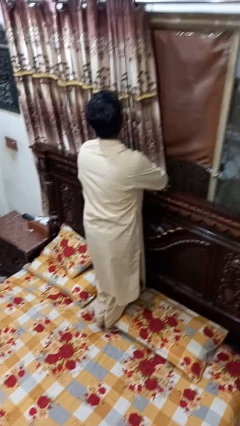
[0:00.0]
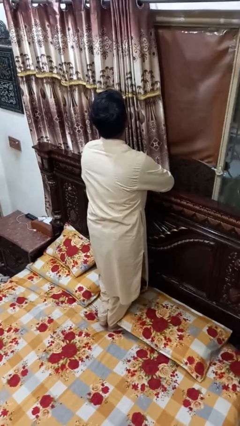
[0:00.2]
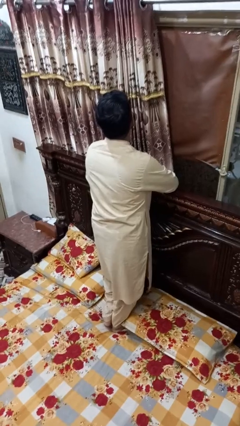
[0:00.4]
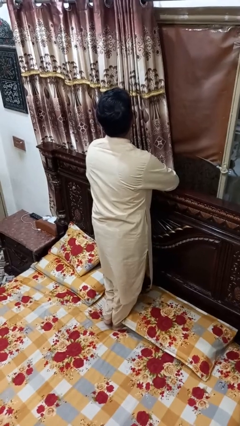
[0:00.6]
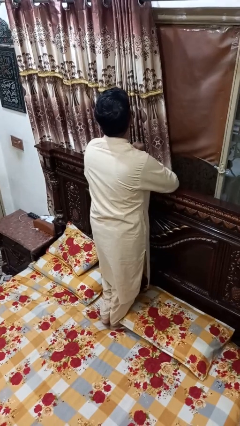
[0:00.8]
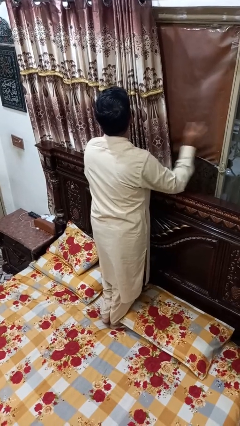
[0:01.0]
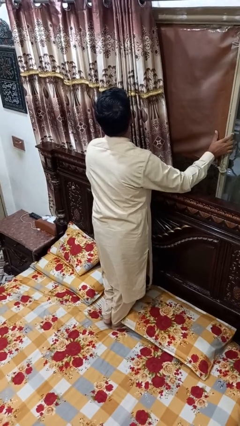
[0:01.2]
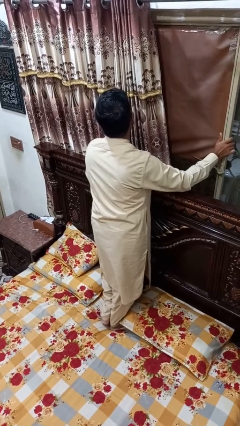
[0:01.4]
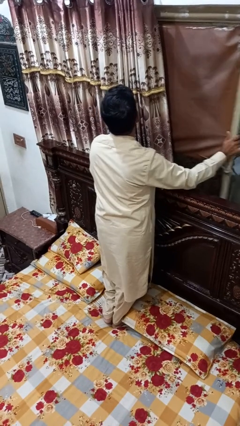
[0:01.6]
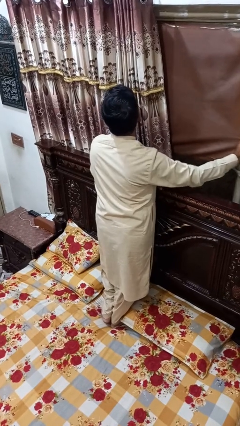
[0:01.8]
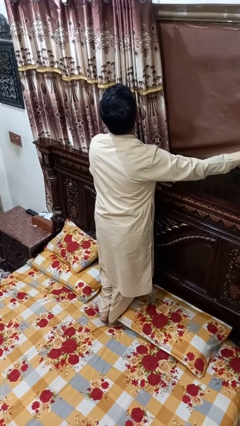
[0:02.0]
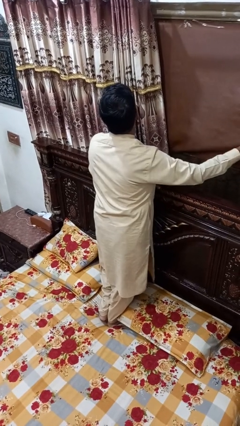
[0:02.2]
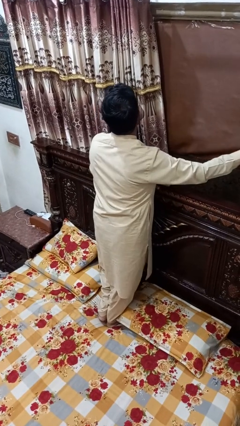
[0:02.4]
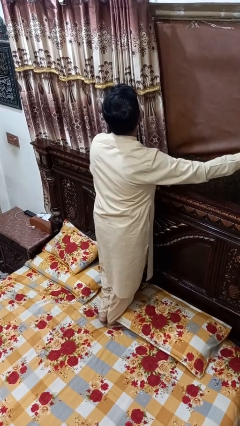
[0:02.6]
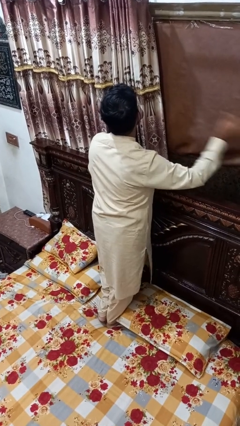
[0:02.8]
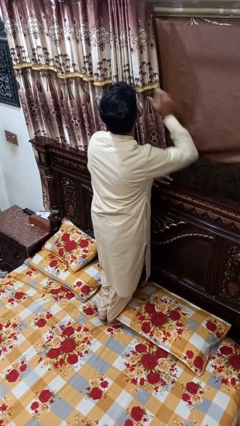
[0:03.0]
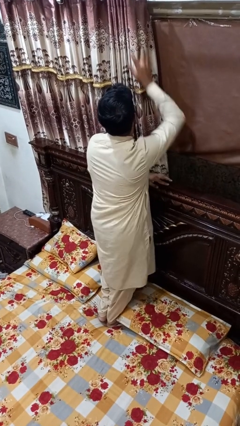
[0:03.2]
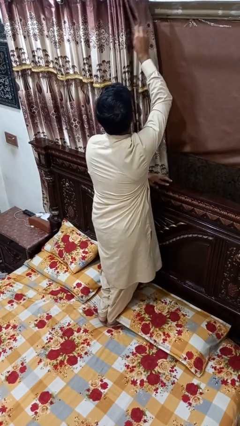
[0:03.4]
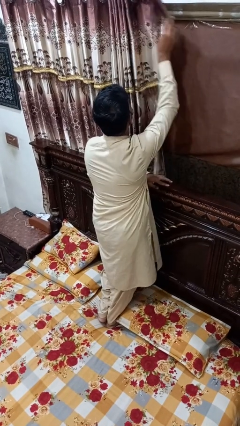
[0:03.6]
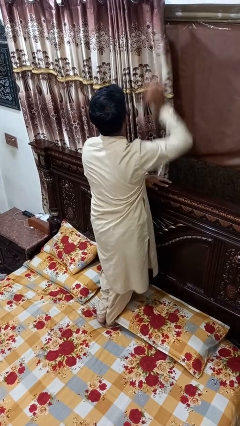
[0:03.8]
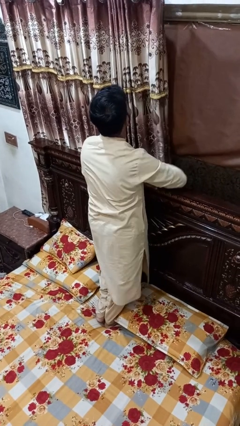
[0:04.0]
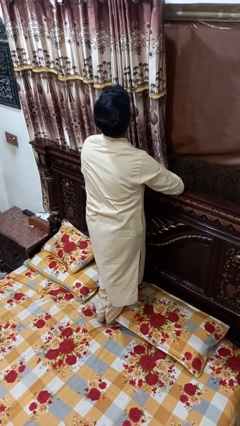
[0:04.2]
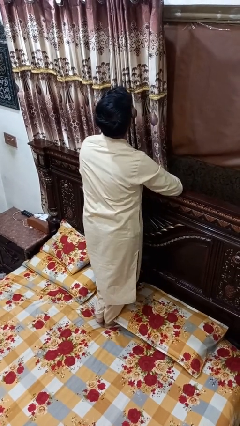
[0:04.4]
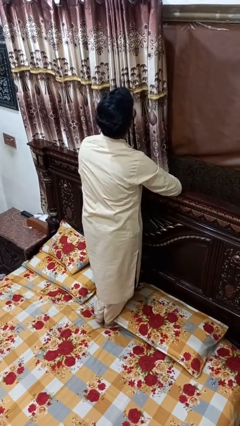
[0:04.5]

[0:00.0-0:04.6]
person closes home window

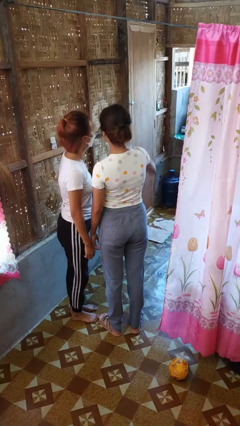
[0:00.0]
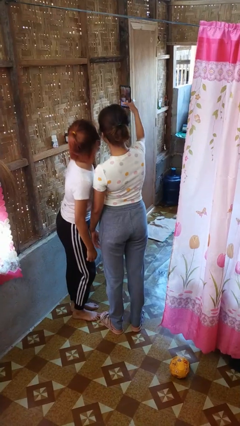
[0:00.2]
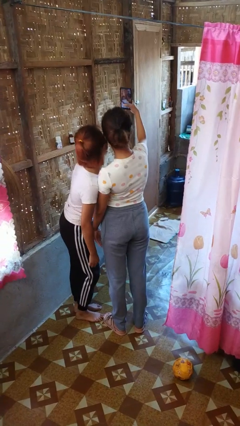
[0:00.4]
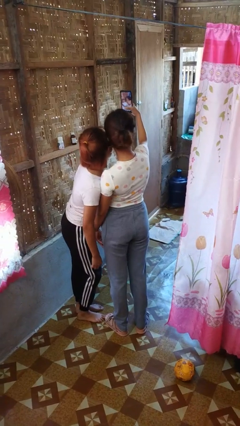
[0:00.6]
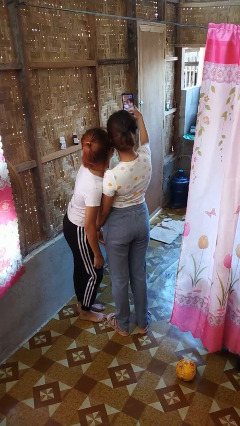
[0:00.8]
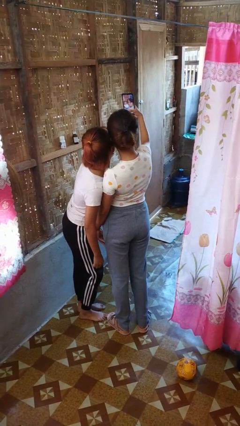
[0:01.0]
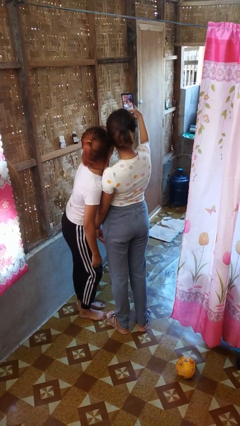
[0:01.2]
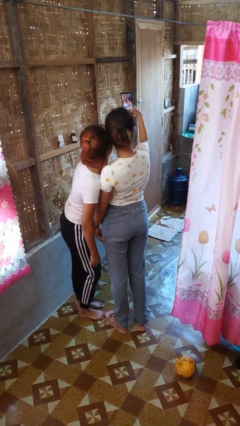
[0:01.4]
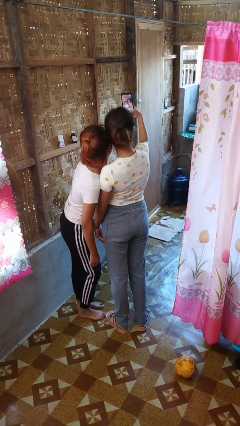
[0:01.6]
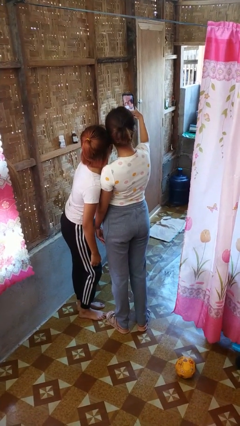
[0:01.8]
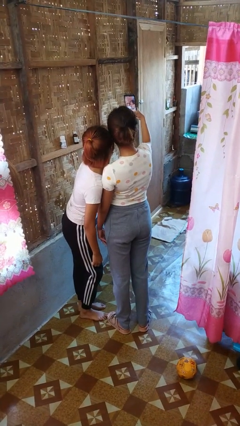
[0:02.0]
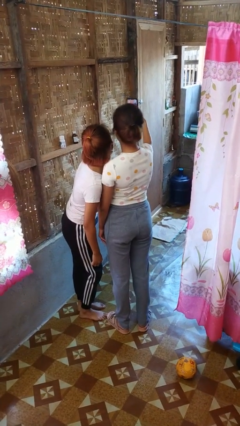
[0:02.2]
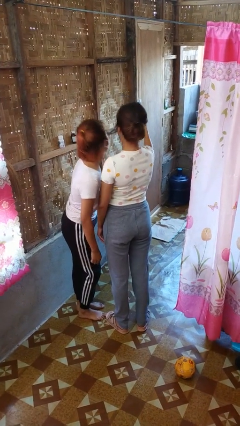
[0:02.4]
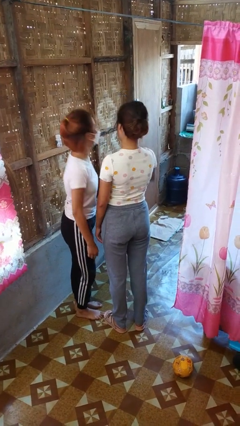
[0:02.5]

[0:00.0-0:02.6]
person takes selfie with person

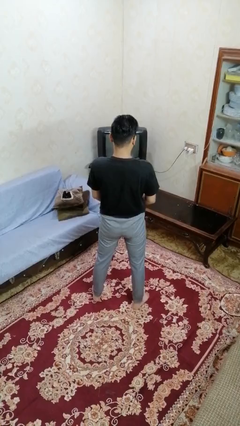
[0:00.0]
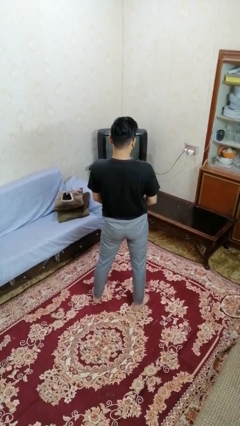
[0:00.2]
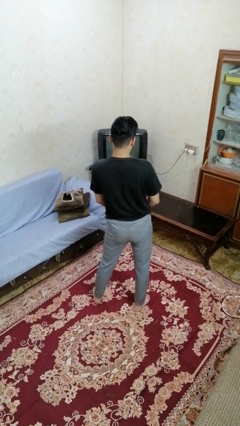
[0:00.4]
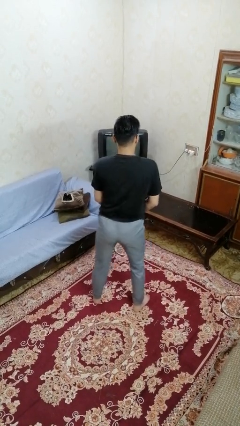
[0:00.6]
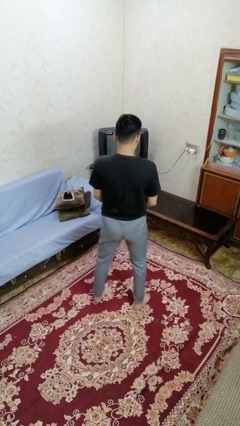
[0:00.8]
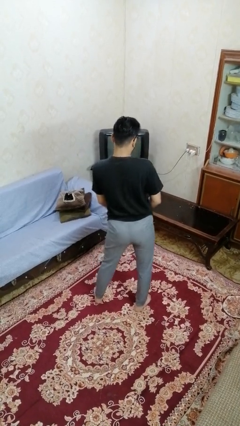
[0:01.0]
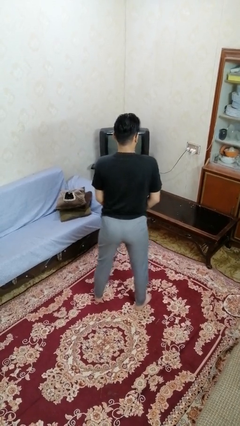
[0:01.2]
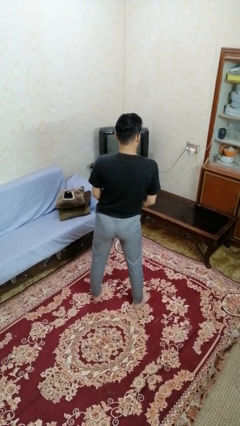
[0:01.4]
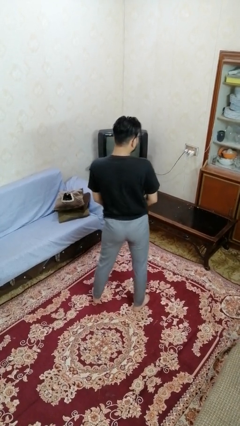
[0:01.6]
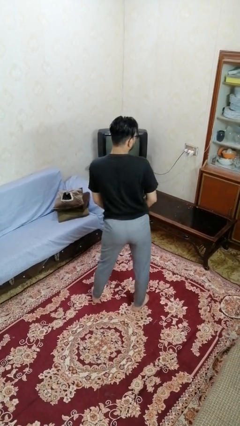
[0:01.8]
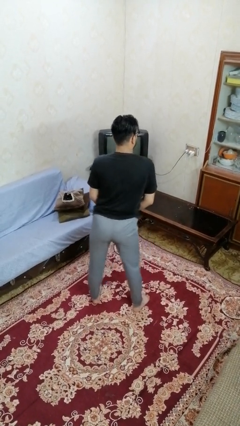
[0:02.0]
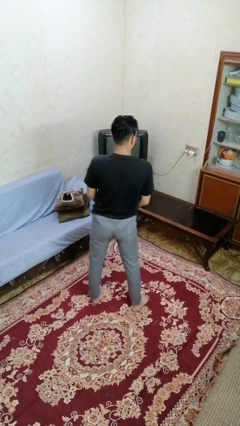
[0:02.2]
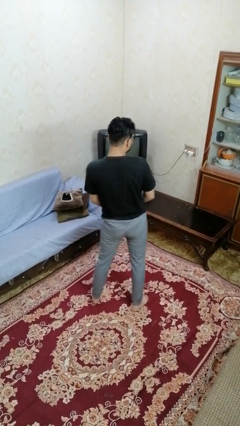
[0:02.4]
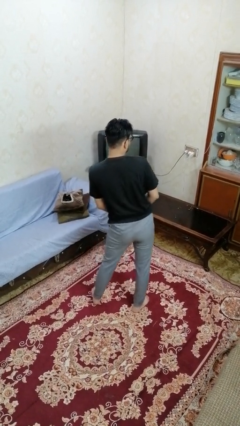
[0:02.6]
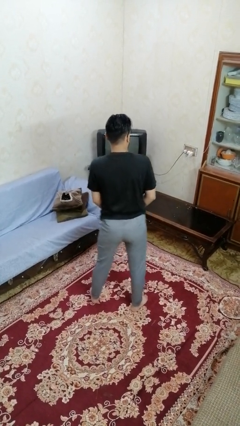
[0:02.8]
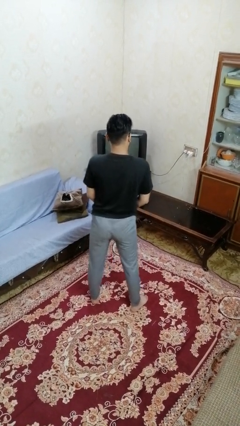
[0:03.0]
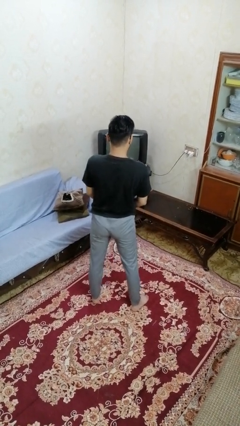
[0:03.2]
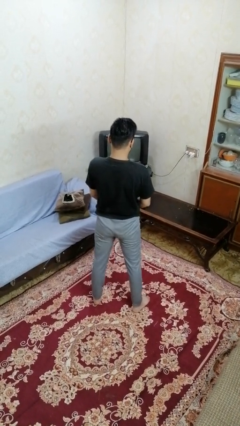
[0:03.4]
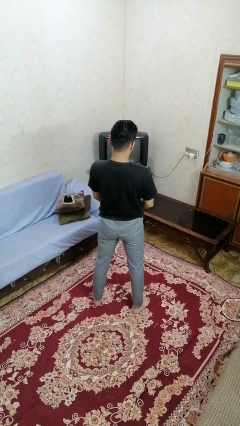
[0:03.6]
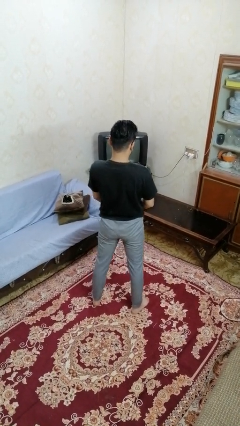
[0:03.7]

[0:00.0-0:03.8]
person wiggles hips

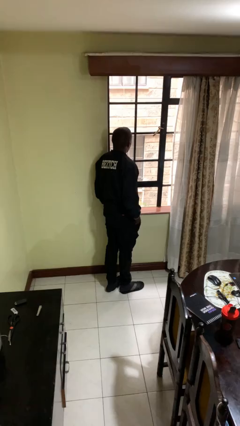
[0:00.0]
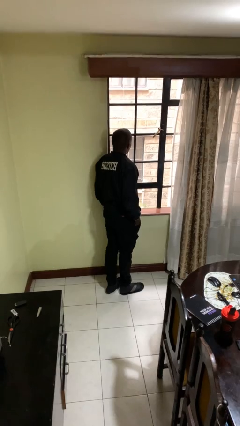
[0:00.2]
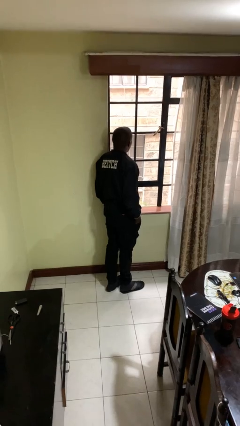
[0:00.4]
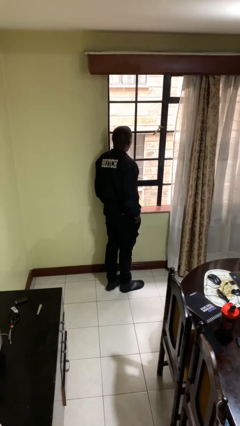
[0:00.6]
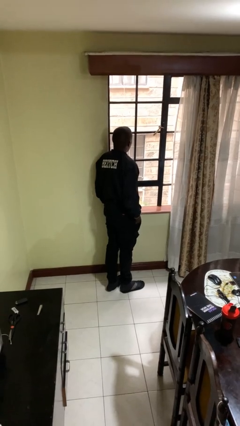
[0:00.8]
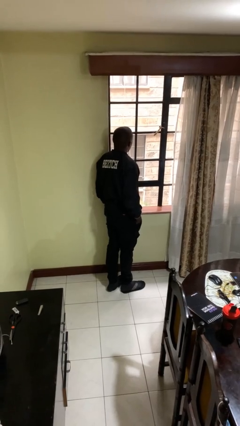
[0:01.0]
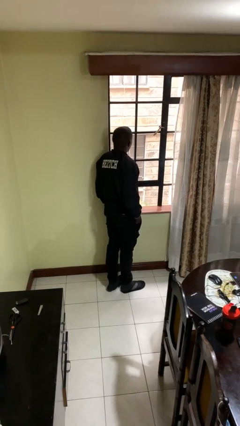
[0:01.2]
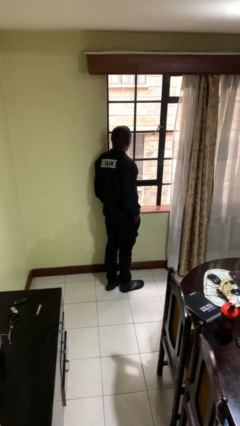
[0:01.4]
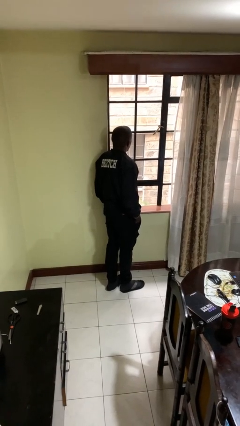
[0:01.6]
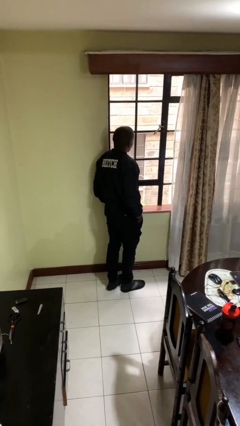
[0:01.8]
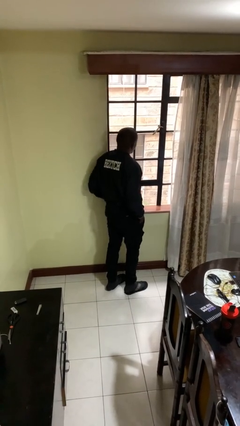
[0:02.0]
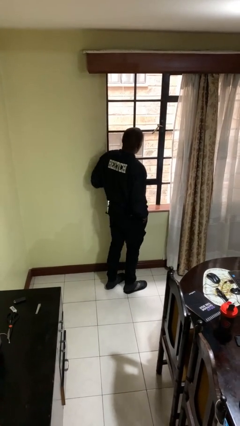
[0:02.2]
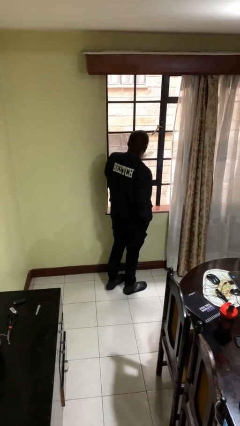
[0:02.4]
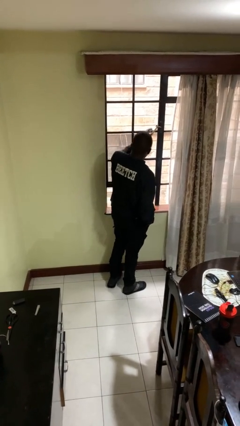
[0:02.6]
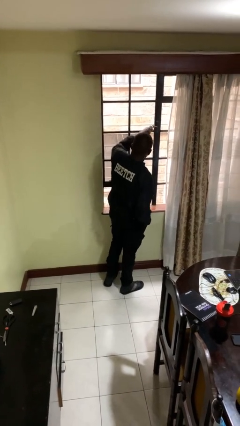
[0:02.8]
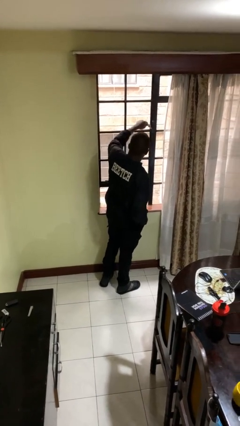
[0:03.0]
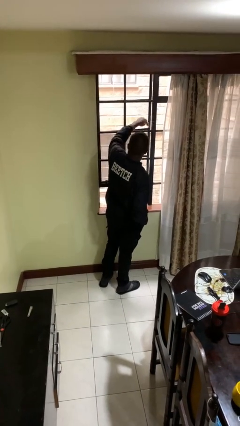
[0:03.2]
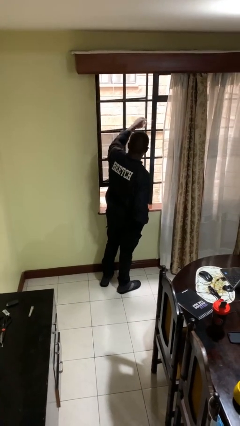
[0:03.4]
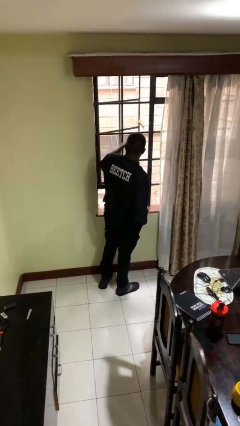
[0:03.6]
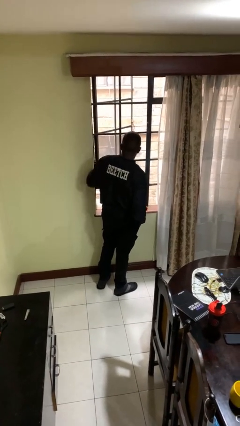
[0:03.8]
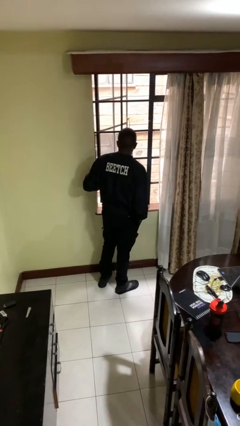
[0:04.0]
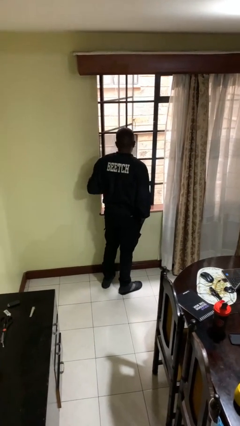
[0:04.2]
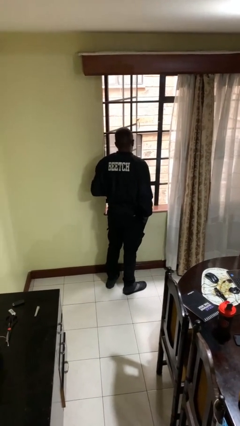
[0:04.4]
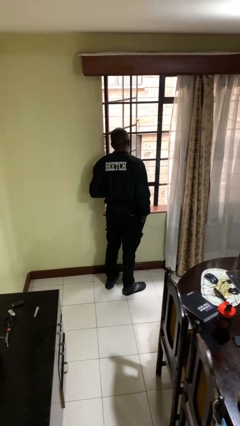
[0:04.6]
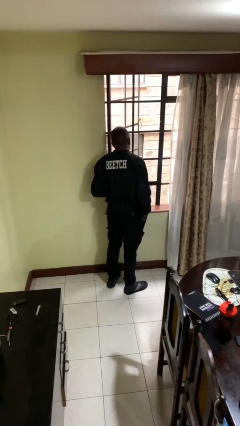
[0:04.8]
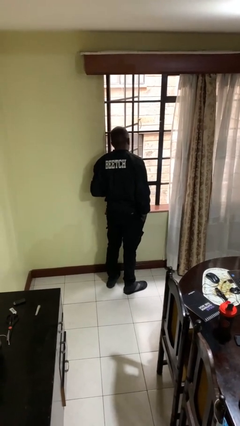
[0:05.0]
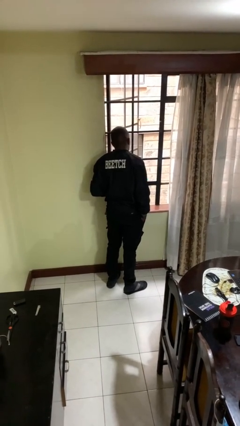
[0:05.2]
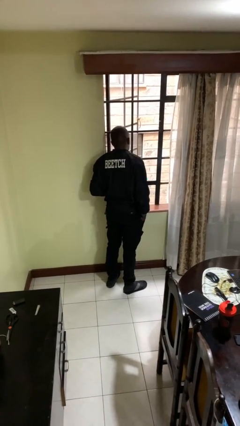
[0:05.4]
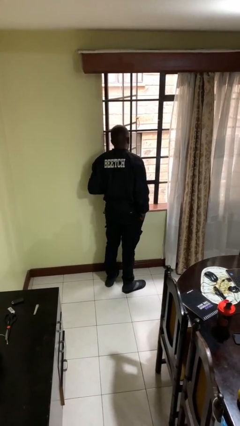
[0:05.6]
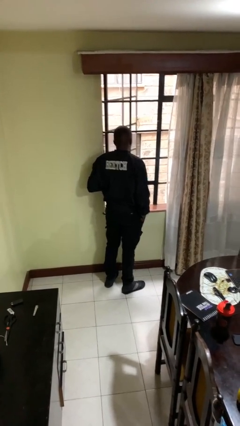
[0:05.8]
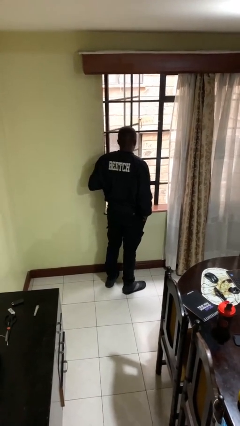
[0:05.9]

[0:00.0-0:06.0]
person opens home window

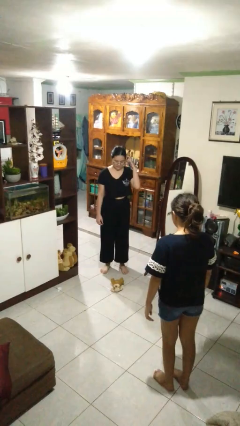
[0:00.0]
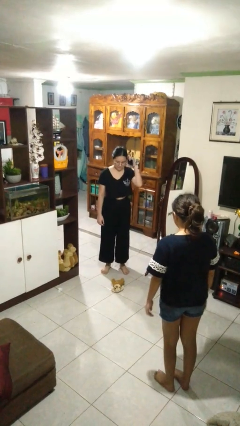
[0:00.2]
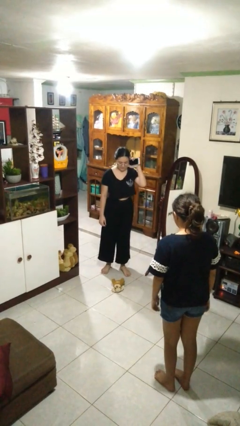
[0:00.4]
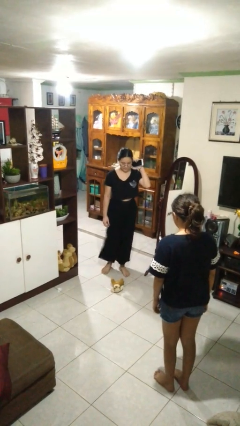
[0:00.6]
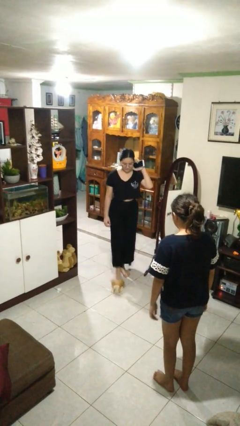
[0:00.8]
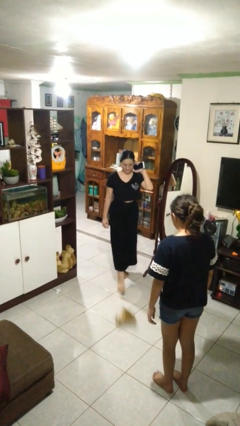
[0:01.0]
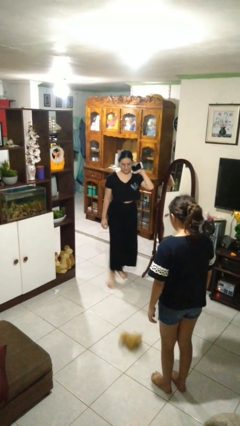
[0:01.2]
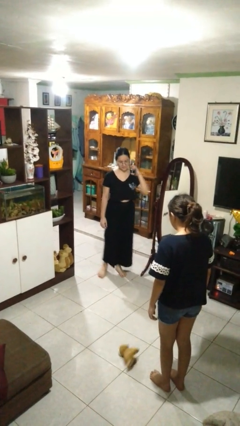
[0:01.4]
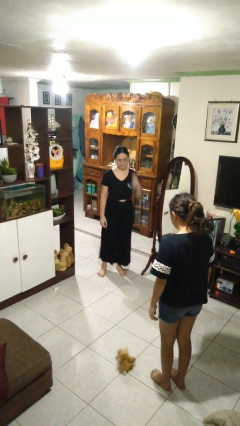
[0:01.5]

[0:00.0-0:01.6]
person kicks object to person
